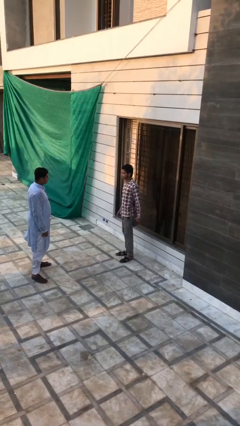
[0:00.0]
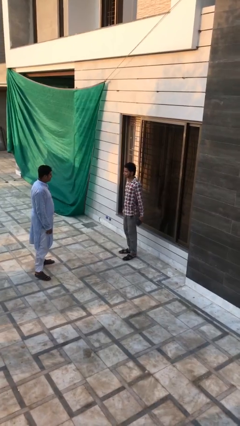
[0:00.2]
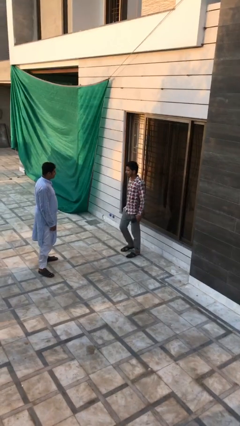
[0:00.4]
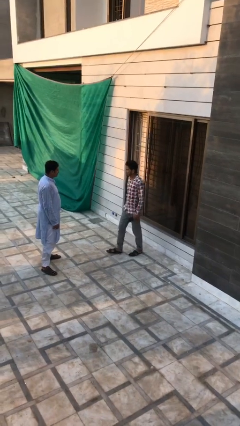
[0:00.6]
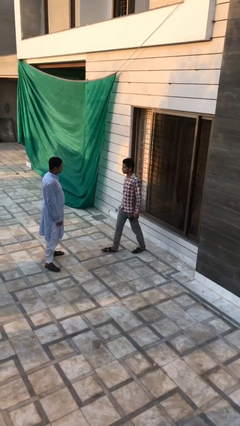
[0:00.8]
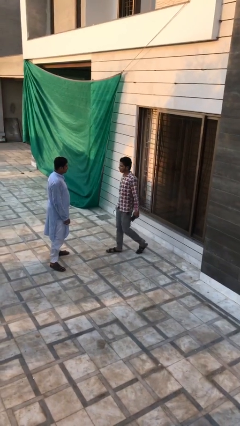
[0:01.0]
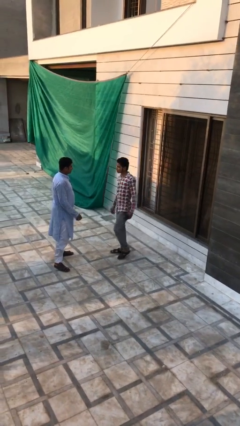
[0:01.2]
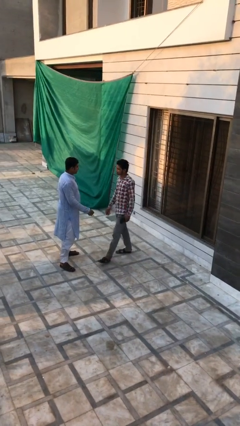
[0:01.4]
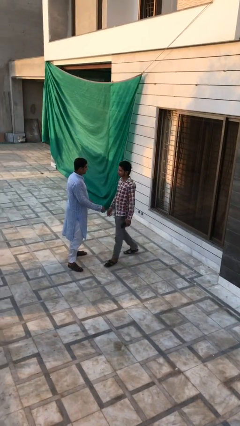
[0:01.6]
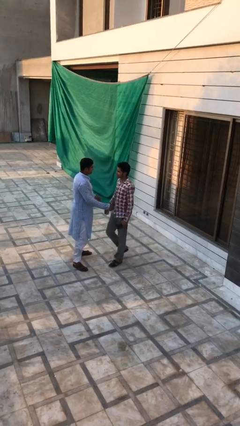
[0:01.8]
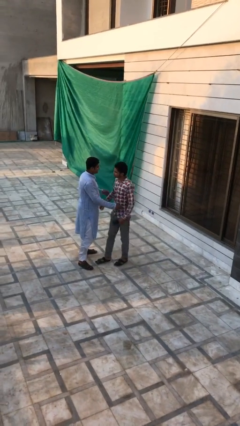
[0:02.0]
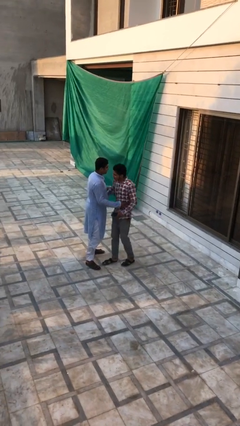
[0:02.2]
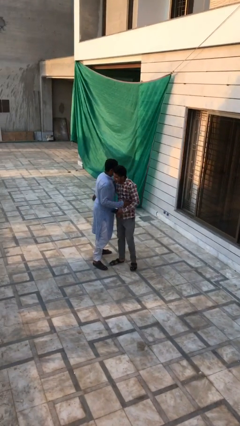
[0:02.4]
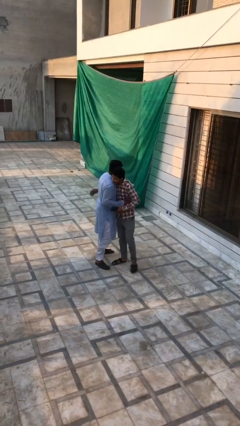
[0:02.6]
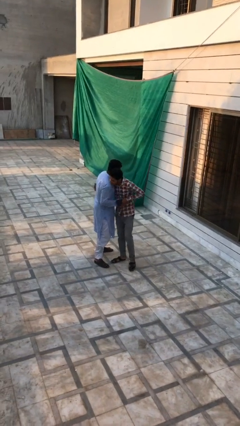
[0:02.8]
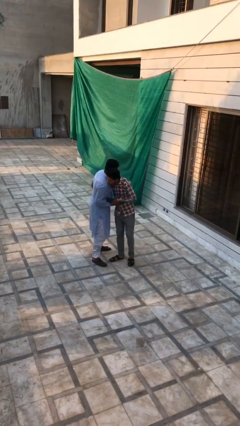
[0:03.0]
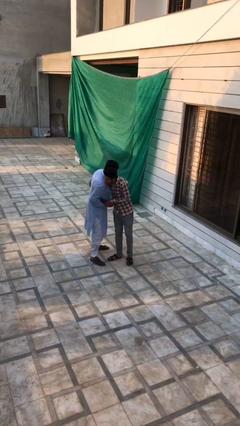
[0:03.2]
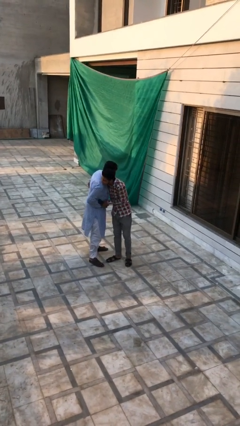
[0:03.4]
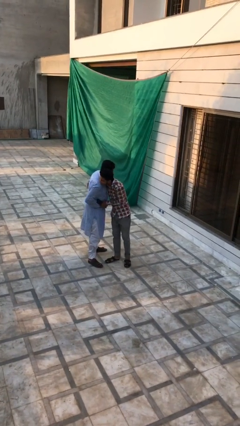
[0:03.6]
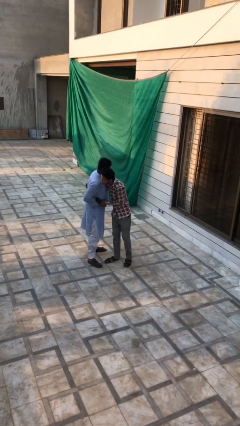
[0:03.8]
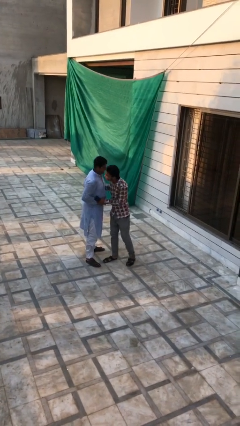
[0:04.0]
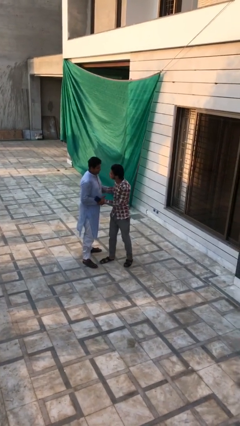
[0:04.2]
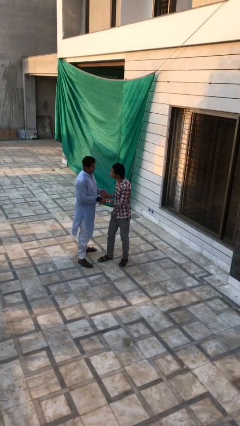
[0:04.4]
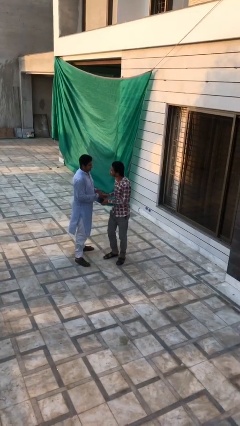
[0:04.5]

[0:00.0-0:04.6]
person embraces person

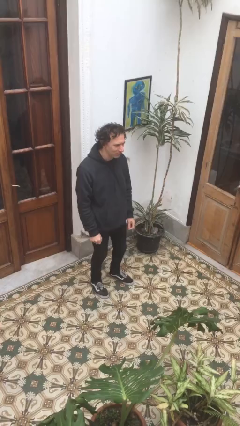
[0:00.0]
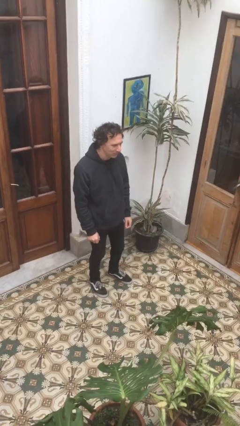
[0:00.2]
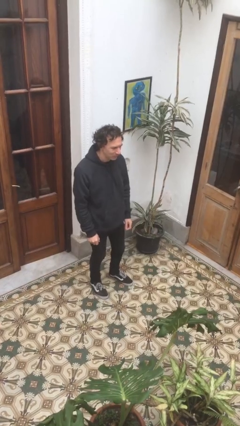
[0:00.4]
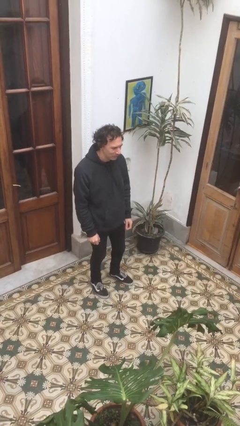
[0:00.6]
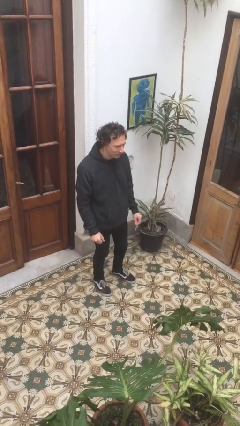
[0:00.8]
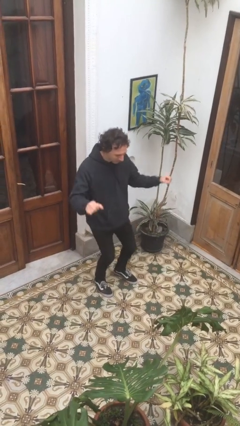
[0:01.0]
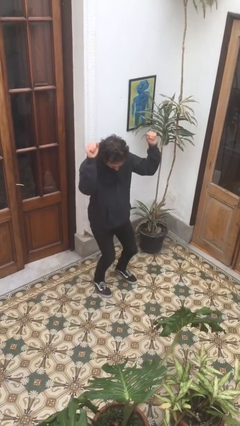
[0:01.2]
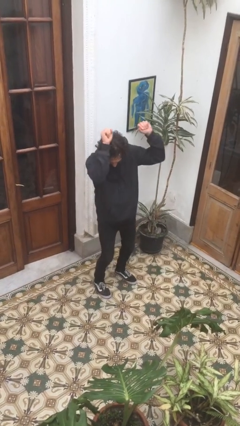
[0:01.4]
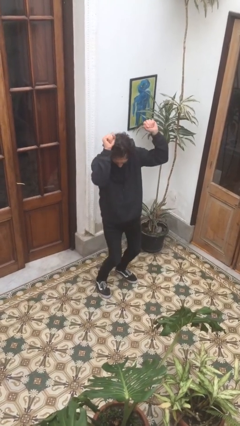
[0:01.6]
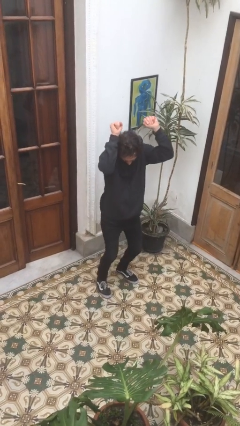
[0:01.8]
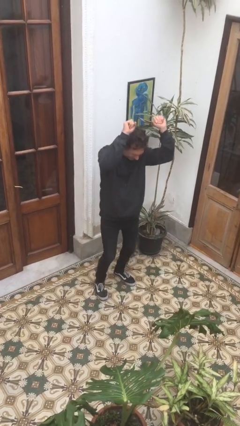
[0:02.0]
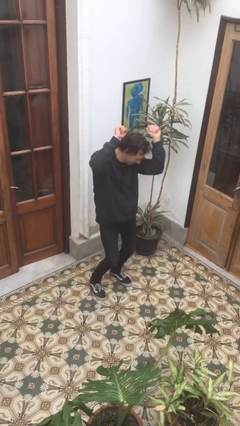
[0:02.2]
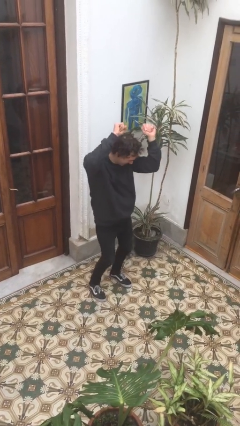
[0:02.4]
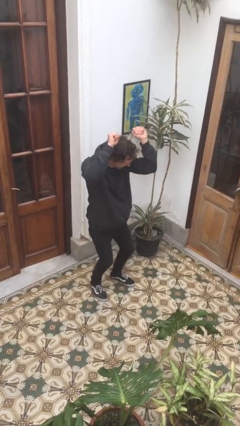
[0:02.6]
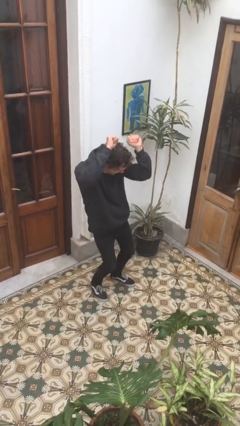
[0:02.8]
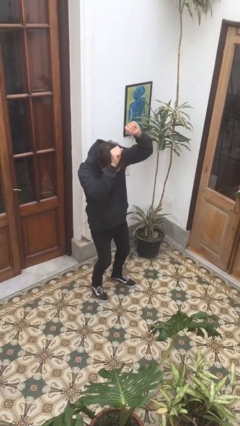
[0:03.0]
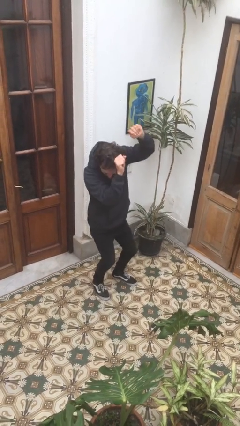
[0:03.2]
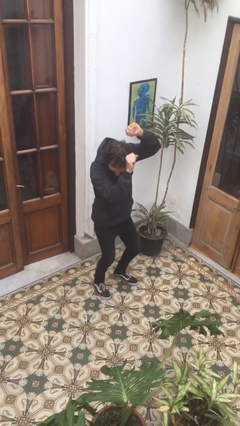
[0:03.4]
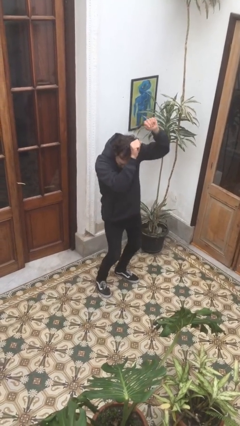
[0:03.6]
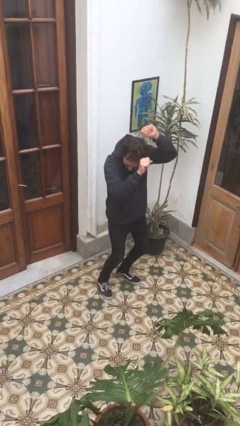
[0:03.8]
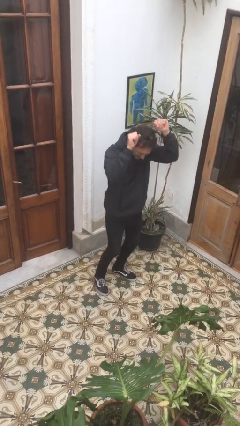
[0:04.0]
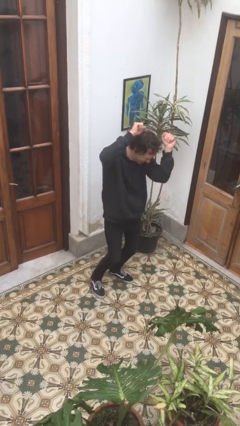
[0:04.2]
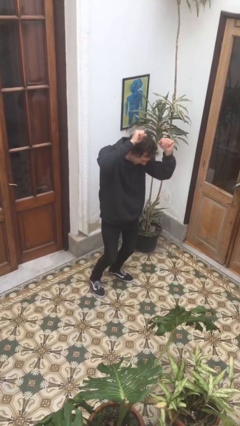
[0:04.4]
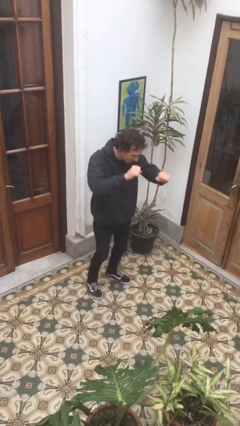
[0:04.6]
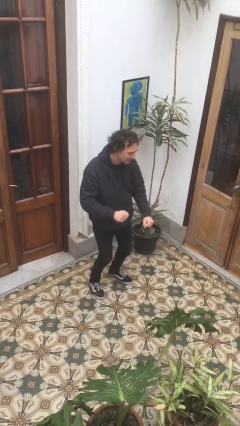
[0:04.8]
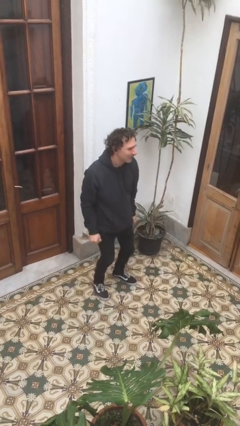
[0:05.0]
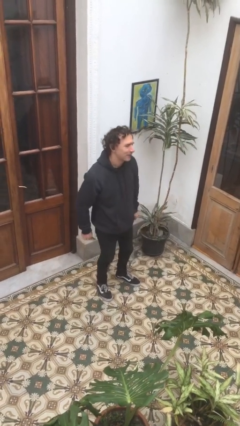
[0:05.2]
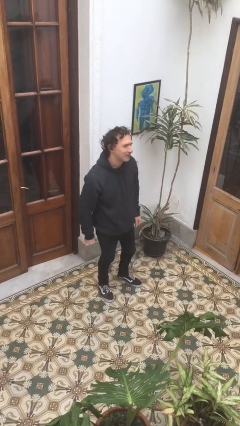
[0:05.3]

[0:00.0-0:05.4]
person dances in place

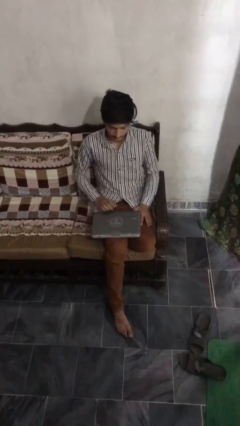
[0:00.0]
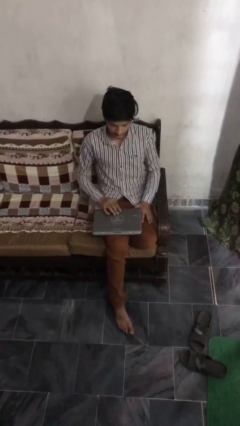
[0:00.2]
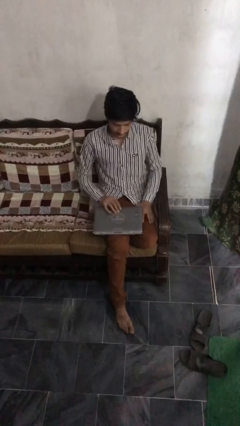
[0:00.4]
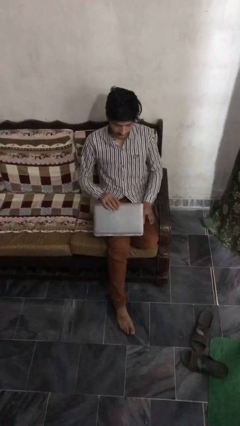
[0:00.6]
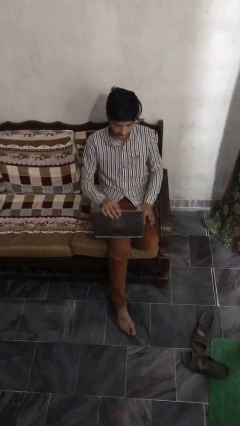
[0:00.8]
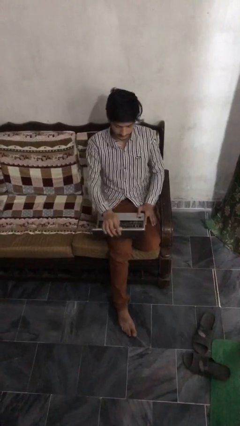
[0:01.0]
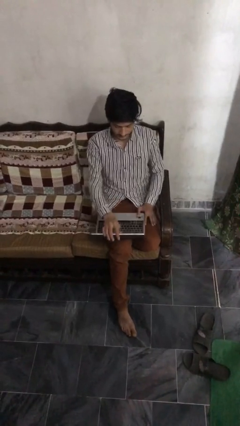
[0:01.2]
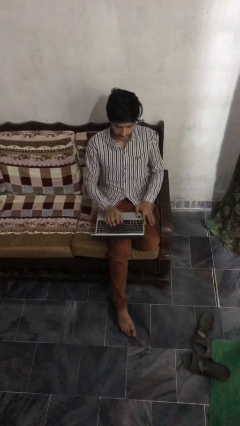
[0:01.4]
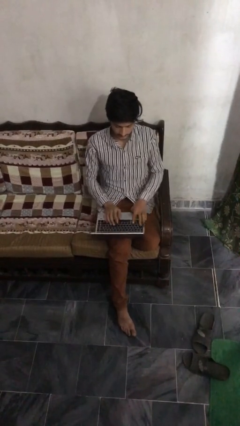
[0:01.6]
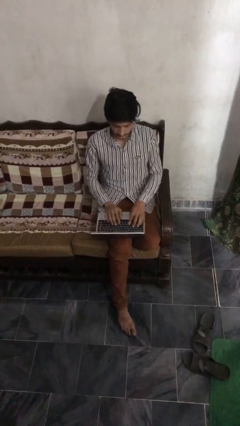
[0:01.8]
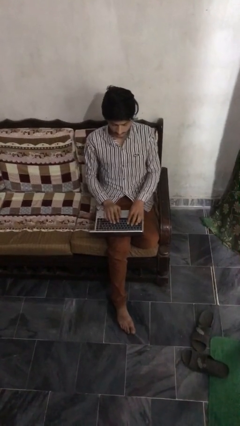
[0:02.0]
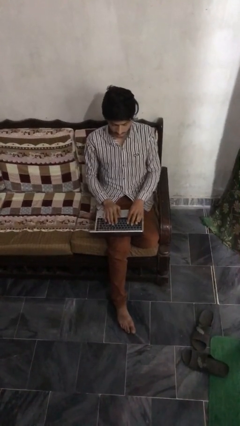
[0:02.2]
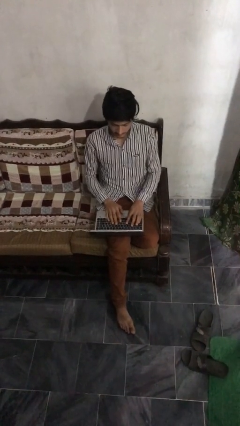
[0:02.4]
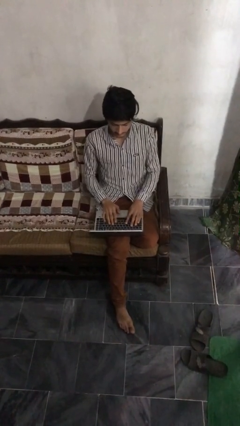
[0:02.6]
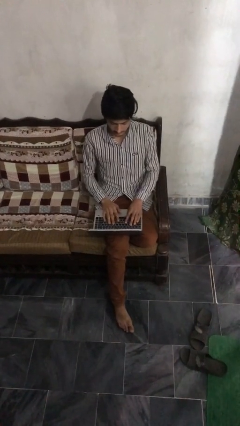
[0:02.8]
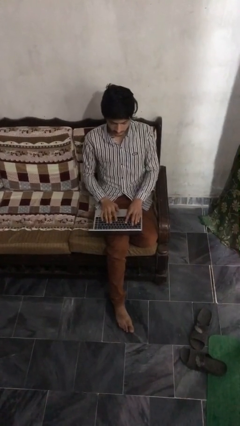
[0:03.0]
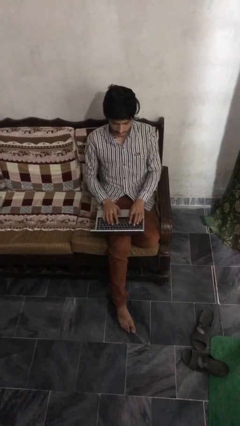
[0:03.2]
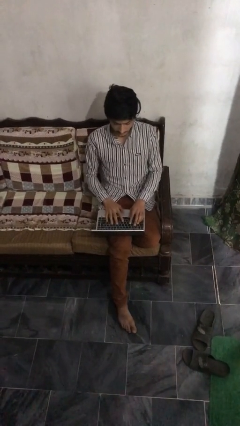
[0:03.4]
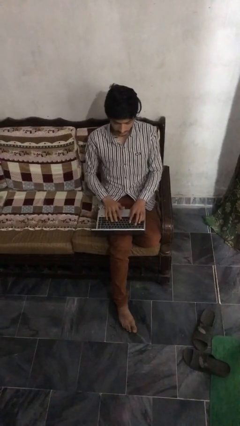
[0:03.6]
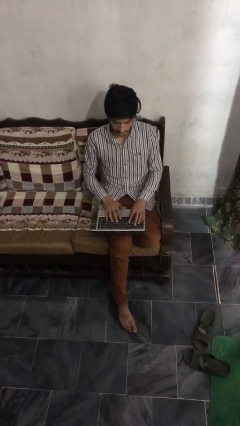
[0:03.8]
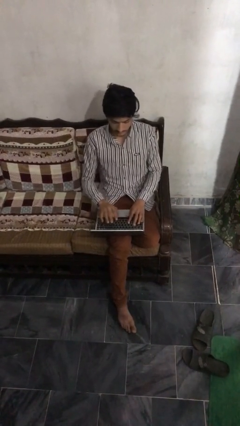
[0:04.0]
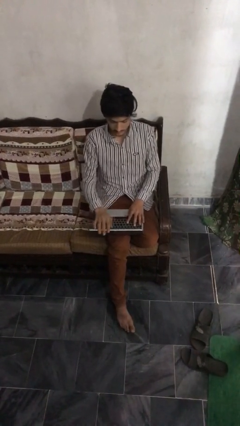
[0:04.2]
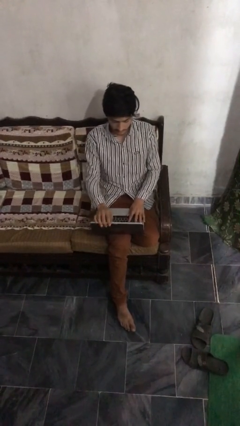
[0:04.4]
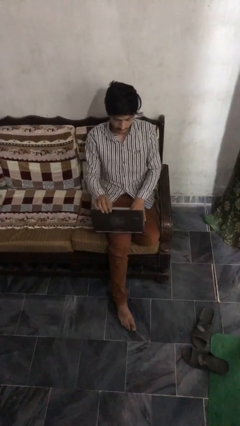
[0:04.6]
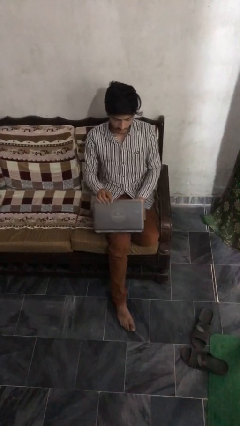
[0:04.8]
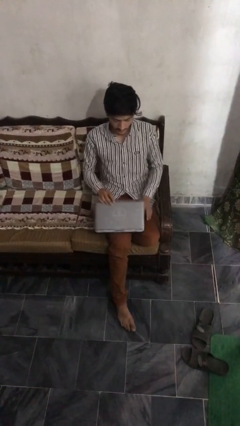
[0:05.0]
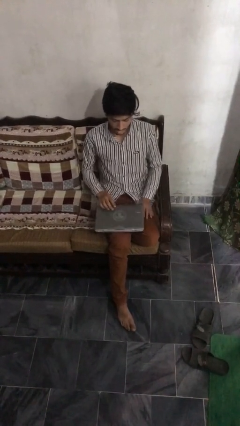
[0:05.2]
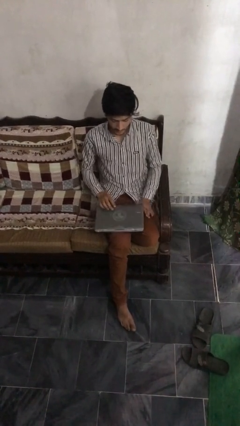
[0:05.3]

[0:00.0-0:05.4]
person interacts with laptop

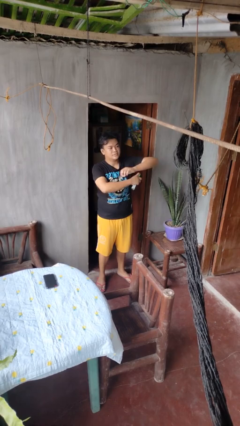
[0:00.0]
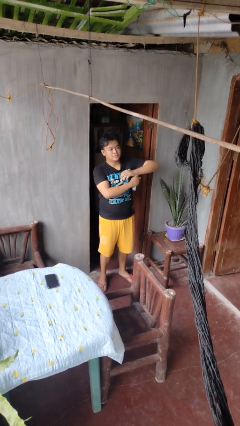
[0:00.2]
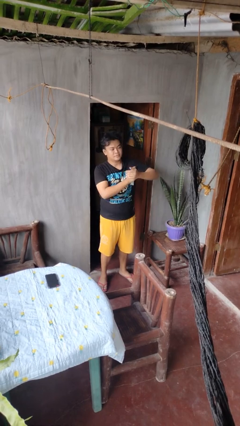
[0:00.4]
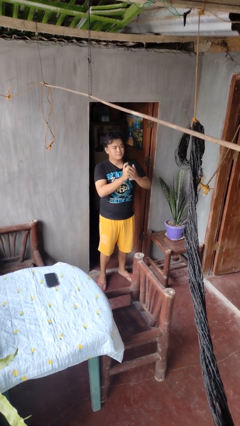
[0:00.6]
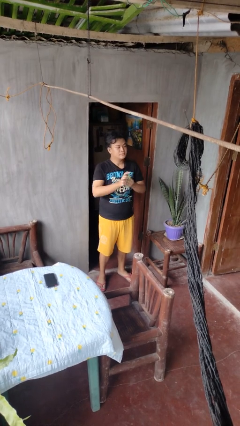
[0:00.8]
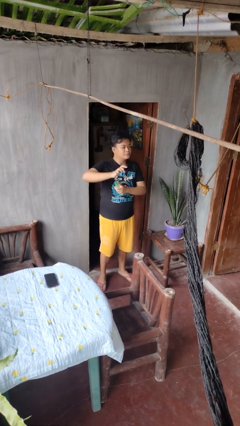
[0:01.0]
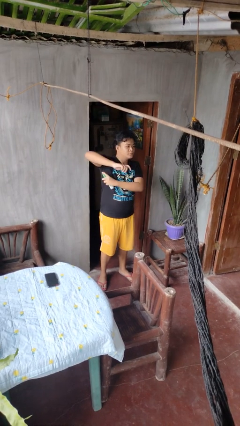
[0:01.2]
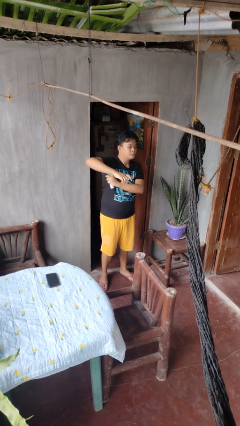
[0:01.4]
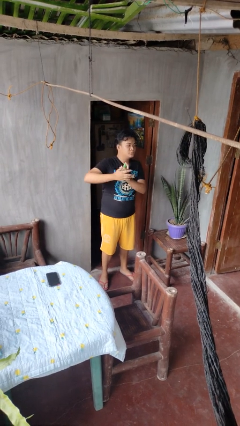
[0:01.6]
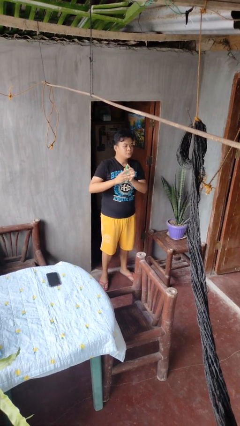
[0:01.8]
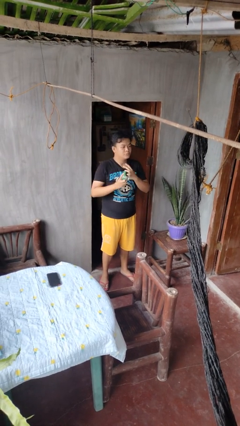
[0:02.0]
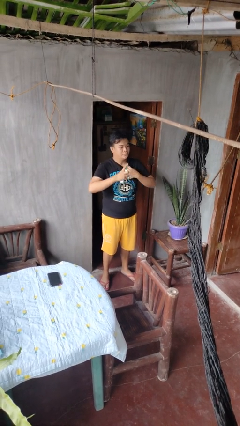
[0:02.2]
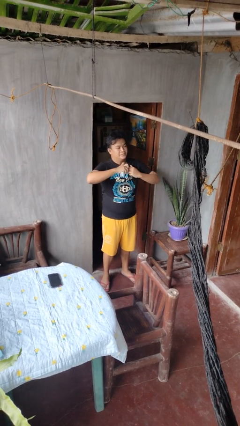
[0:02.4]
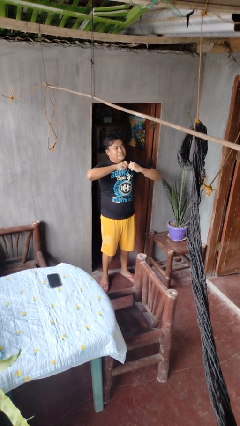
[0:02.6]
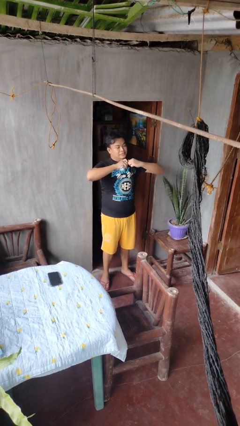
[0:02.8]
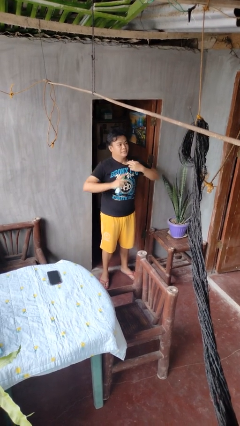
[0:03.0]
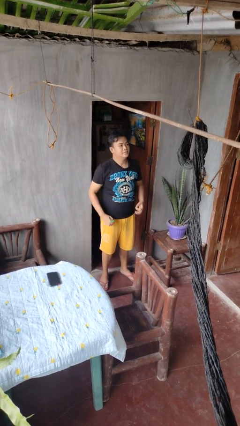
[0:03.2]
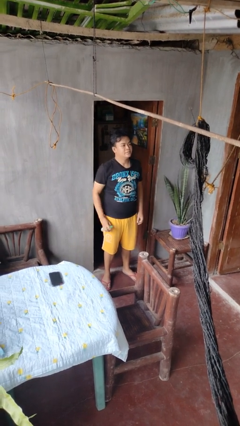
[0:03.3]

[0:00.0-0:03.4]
person applies deodorant
